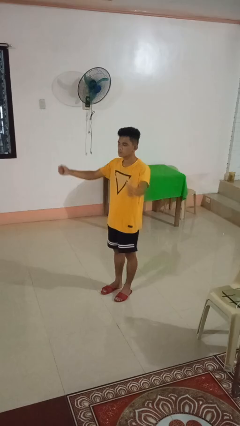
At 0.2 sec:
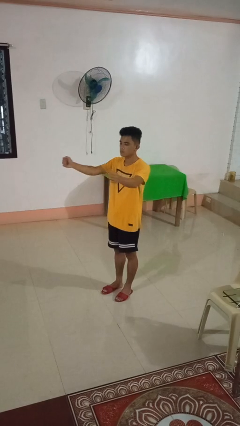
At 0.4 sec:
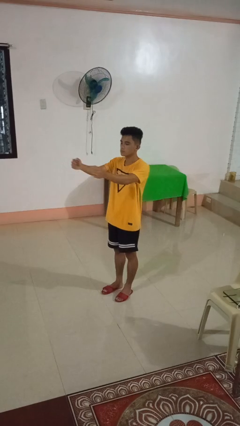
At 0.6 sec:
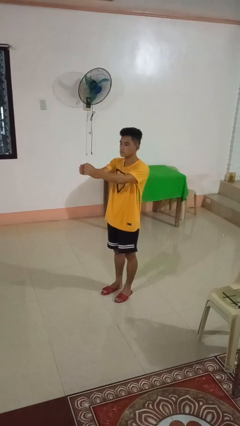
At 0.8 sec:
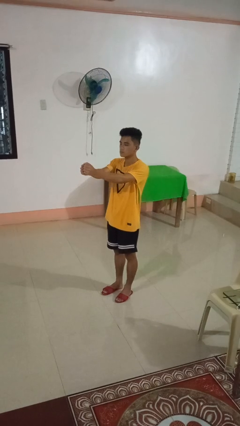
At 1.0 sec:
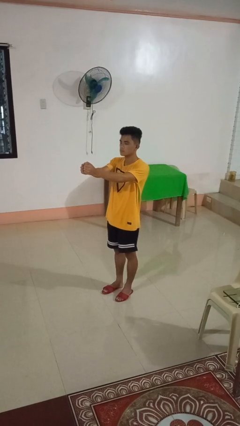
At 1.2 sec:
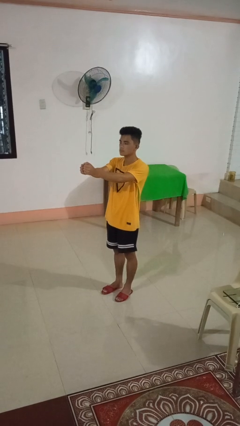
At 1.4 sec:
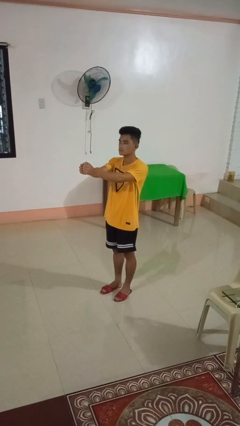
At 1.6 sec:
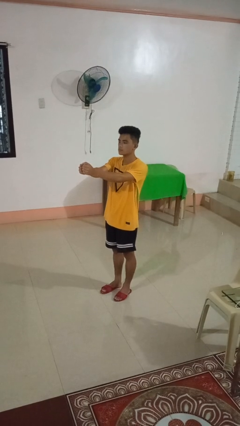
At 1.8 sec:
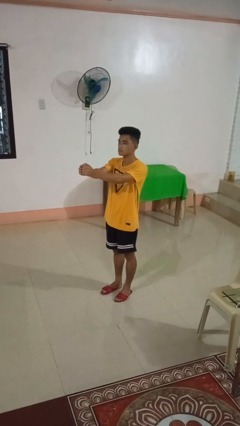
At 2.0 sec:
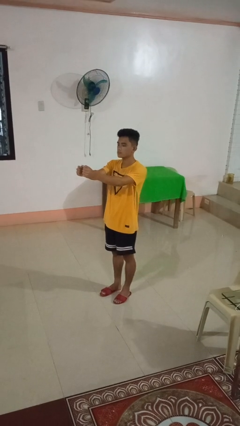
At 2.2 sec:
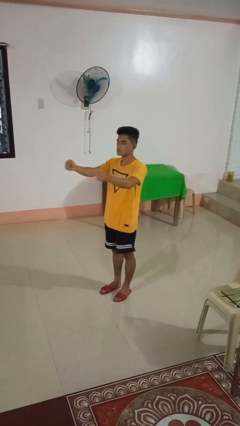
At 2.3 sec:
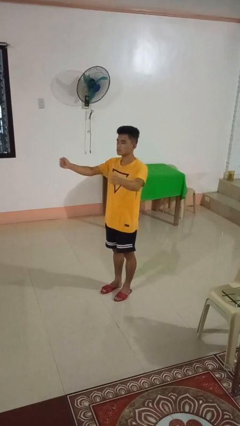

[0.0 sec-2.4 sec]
person gestures zoom in

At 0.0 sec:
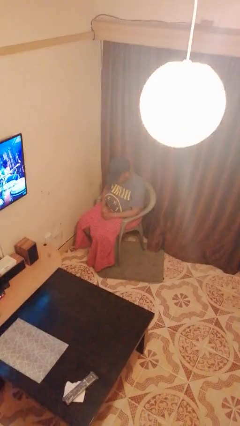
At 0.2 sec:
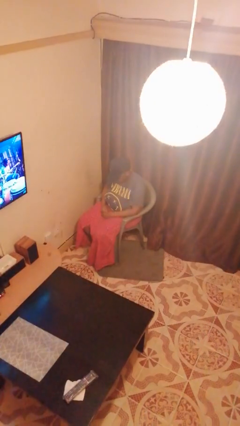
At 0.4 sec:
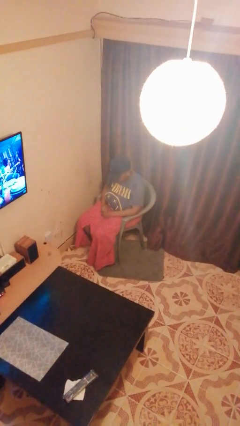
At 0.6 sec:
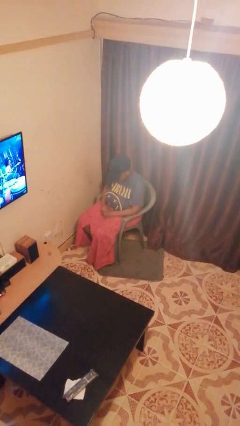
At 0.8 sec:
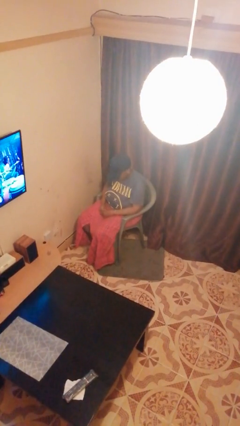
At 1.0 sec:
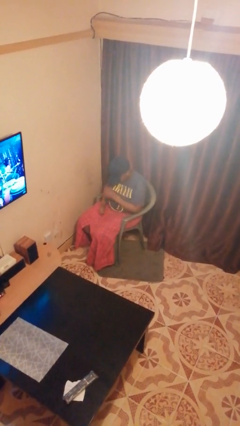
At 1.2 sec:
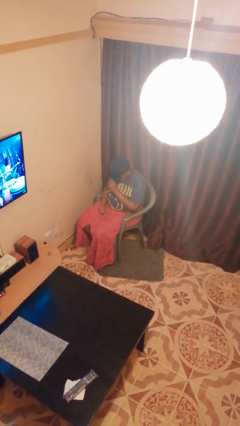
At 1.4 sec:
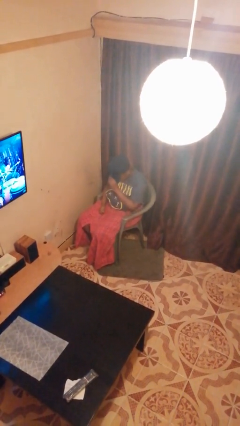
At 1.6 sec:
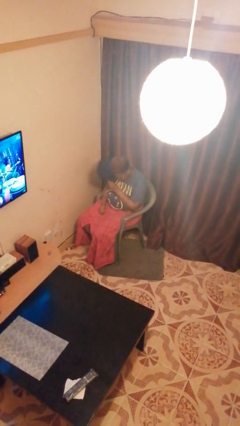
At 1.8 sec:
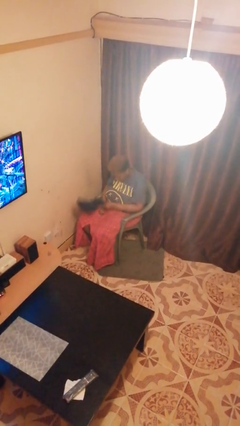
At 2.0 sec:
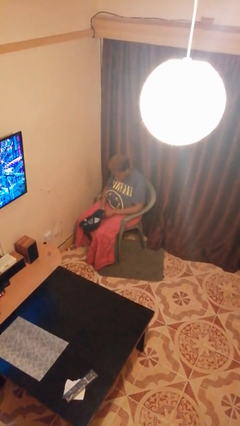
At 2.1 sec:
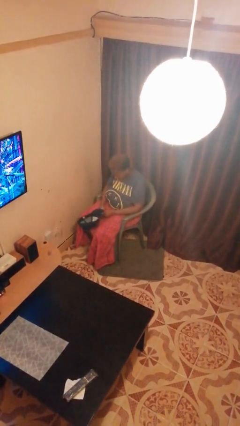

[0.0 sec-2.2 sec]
person takes off hat

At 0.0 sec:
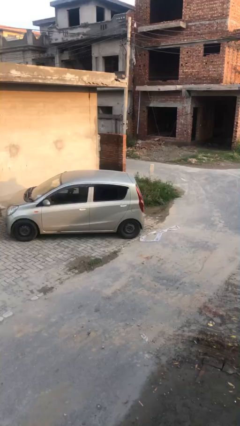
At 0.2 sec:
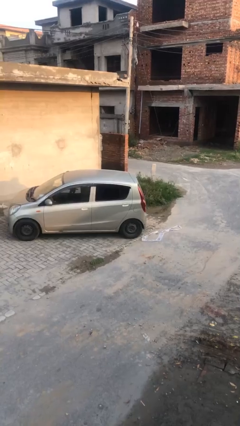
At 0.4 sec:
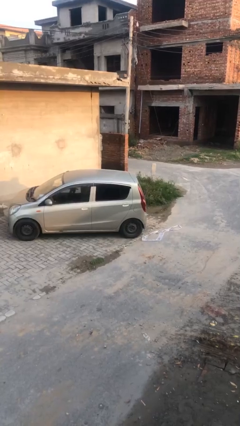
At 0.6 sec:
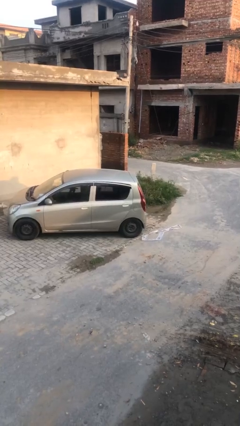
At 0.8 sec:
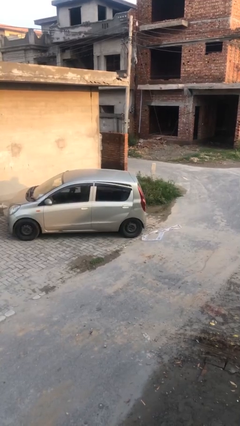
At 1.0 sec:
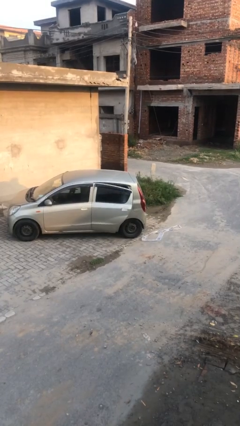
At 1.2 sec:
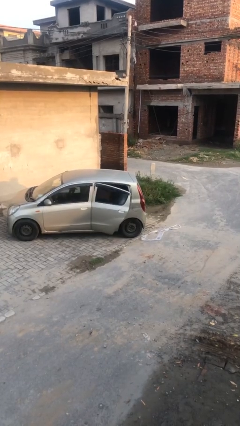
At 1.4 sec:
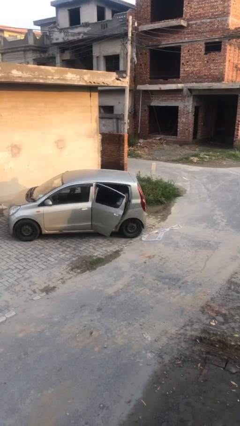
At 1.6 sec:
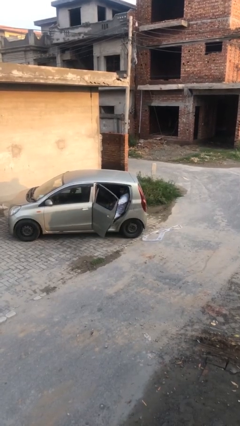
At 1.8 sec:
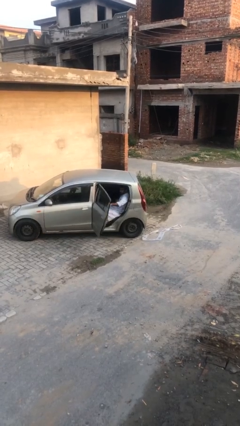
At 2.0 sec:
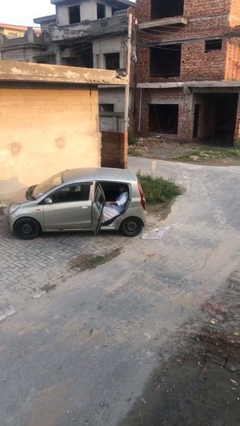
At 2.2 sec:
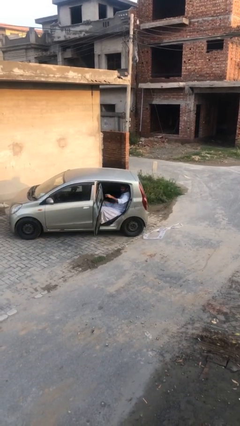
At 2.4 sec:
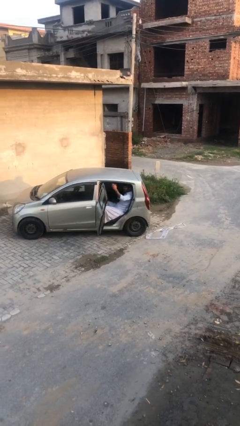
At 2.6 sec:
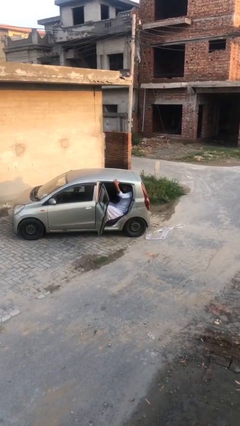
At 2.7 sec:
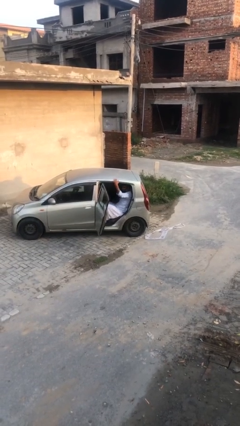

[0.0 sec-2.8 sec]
person opens car door

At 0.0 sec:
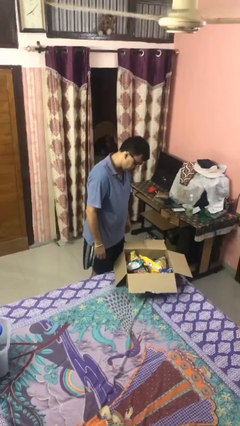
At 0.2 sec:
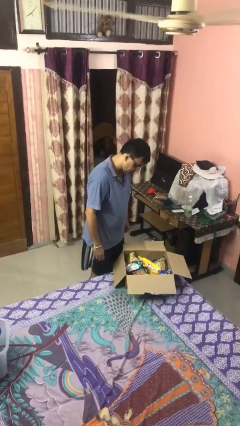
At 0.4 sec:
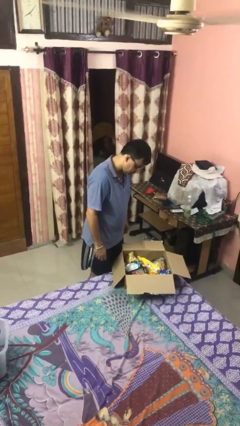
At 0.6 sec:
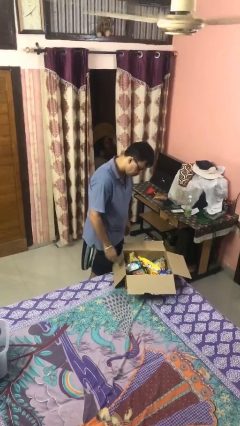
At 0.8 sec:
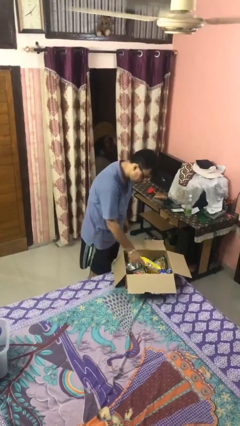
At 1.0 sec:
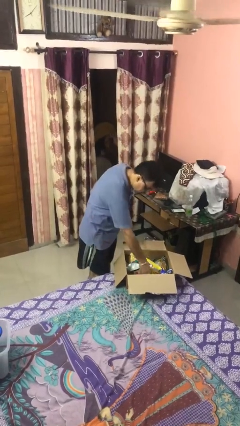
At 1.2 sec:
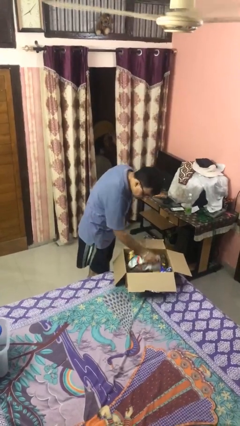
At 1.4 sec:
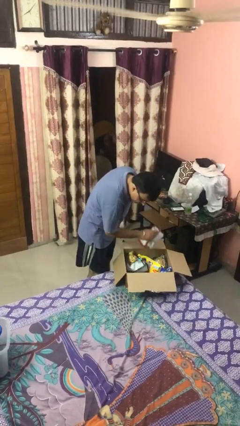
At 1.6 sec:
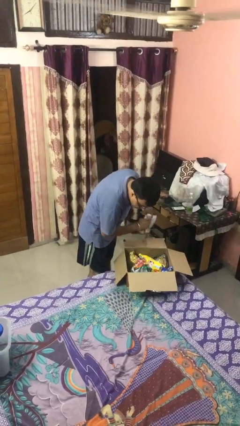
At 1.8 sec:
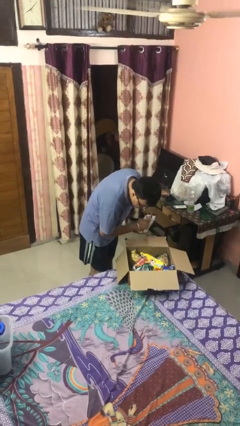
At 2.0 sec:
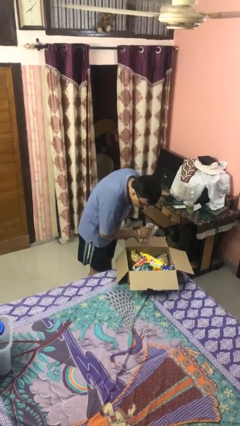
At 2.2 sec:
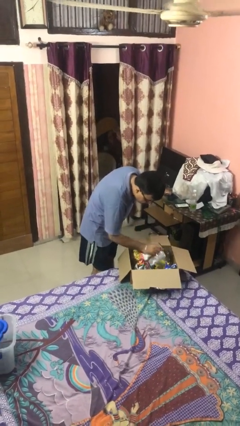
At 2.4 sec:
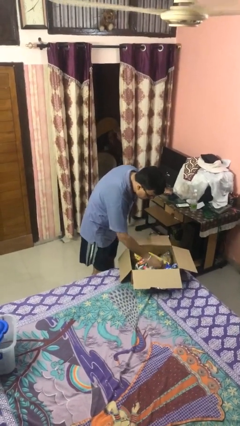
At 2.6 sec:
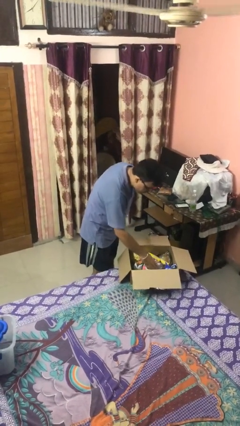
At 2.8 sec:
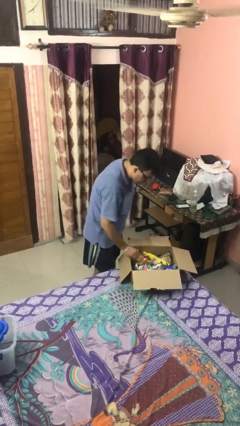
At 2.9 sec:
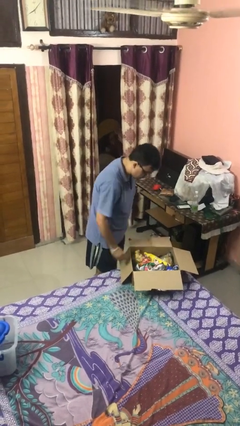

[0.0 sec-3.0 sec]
person searches in box

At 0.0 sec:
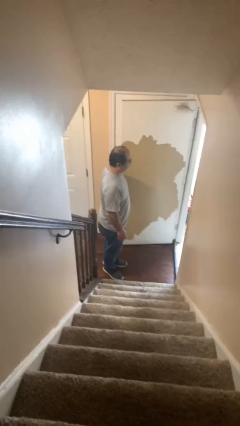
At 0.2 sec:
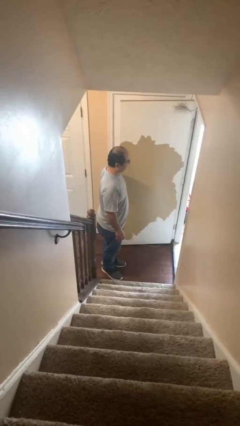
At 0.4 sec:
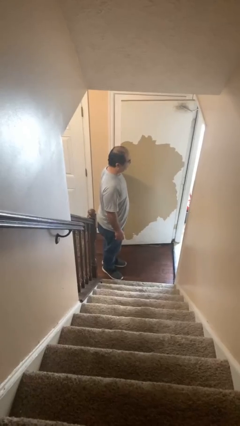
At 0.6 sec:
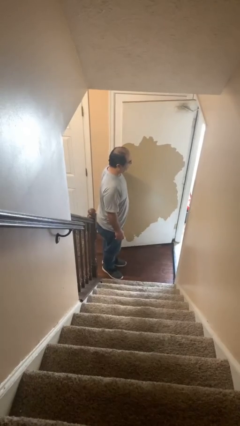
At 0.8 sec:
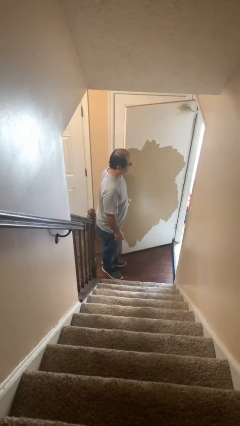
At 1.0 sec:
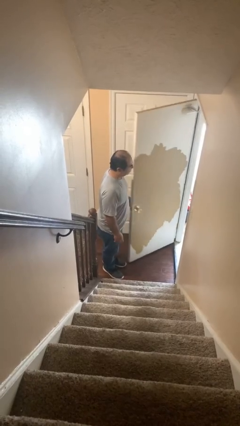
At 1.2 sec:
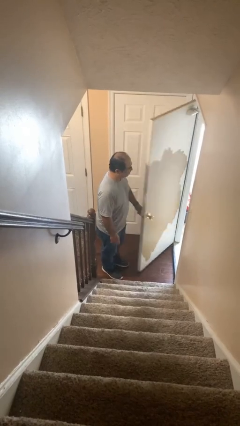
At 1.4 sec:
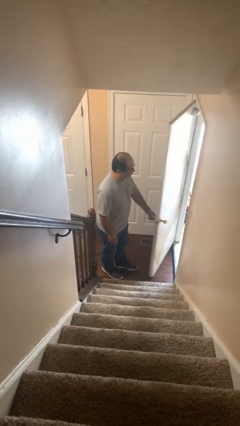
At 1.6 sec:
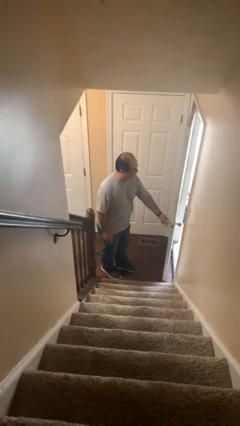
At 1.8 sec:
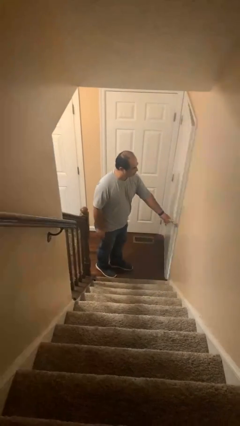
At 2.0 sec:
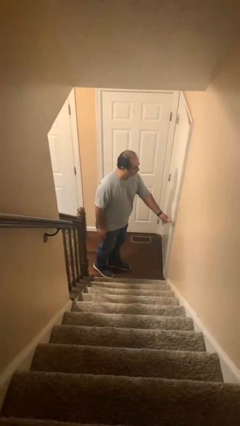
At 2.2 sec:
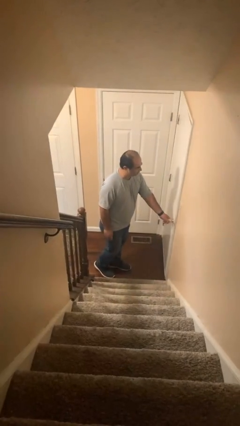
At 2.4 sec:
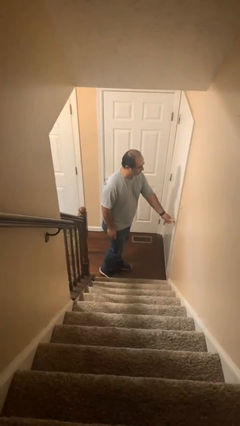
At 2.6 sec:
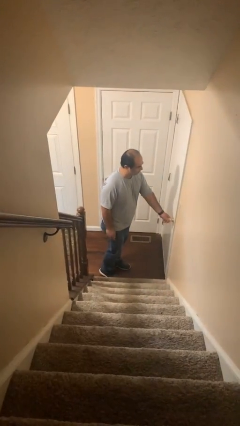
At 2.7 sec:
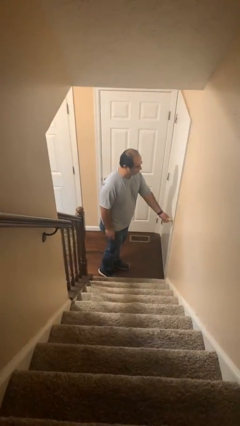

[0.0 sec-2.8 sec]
person closes facility door

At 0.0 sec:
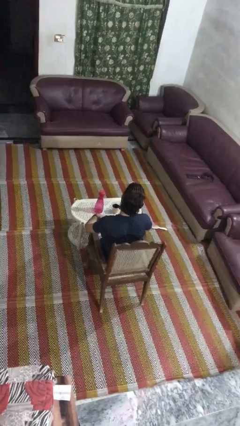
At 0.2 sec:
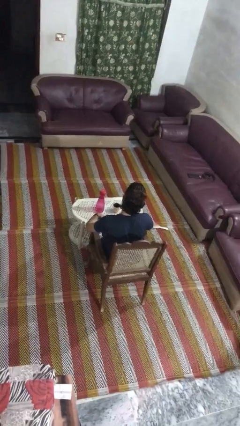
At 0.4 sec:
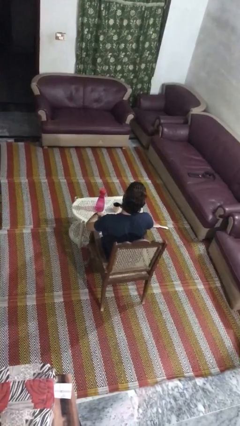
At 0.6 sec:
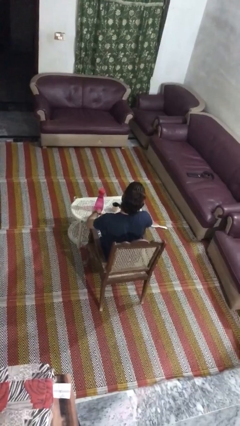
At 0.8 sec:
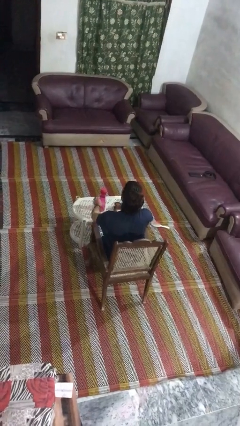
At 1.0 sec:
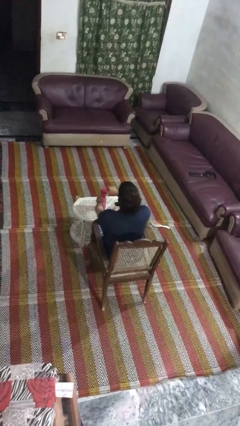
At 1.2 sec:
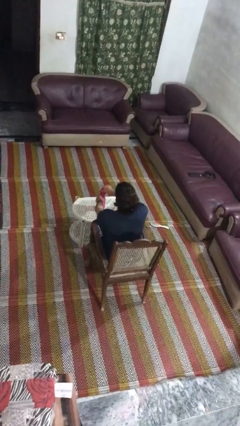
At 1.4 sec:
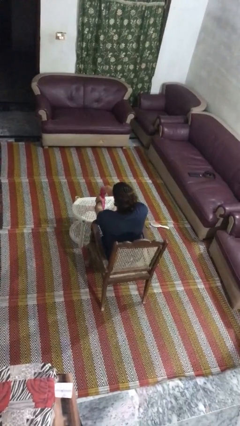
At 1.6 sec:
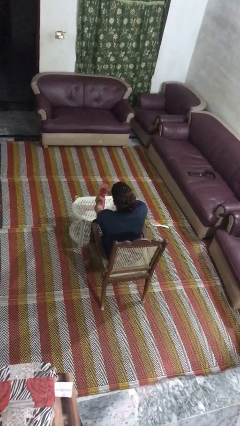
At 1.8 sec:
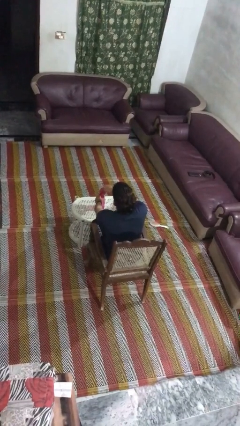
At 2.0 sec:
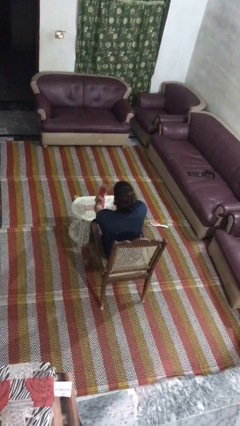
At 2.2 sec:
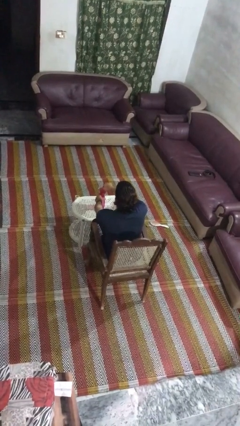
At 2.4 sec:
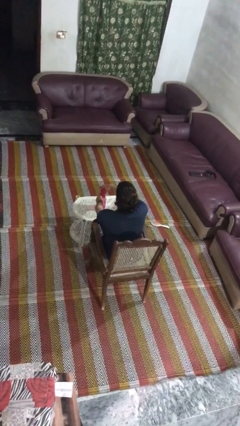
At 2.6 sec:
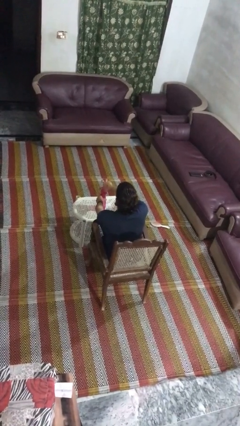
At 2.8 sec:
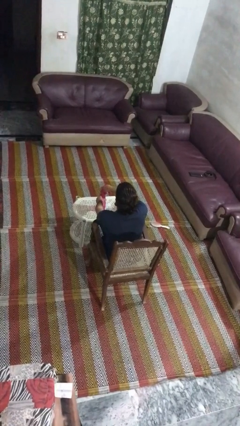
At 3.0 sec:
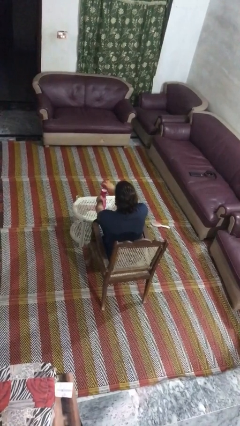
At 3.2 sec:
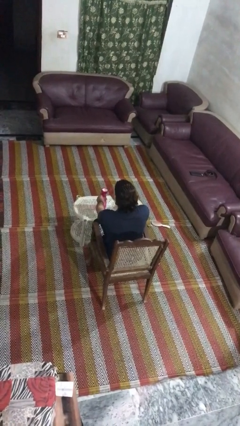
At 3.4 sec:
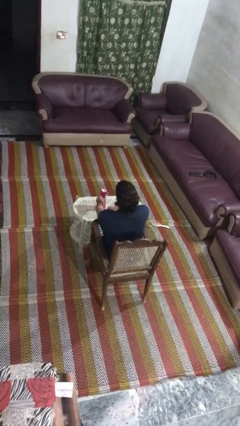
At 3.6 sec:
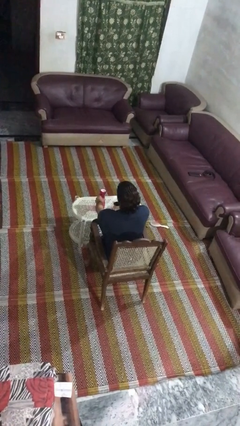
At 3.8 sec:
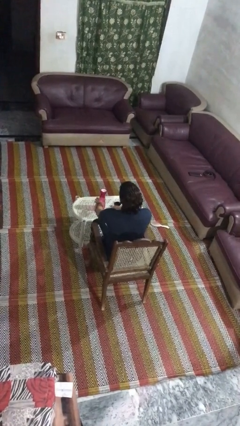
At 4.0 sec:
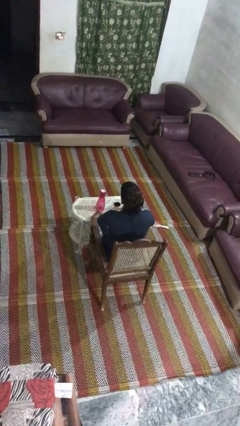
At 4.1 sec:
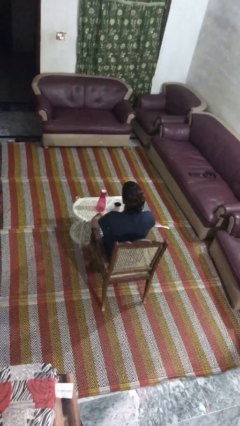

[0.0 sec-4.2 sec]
person unscrews lid from bottle
